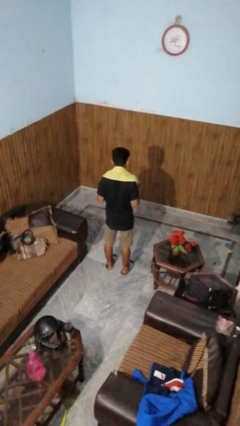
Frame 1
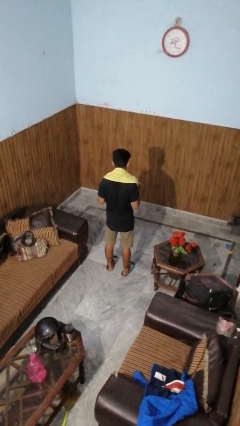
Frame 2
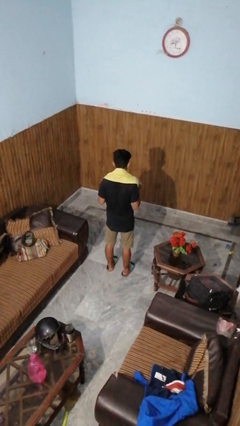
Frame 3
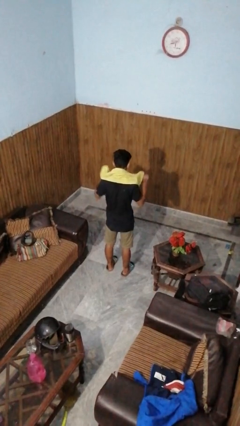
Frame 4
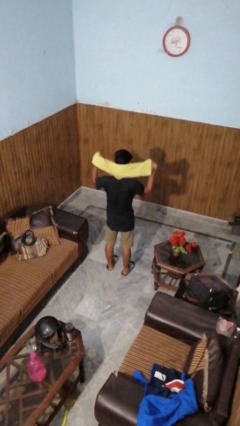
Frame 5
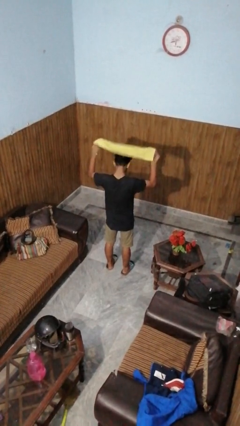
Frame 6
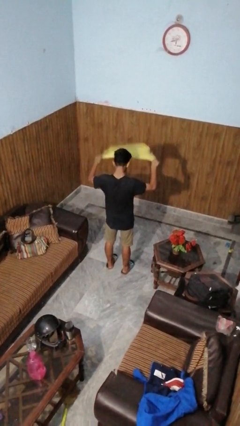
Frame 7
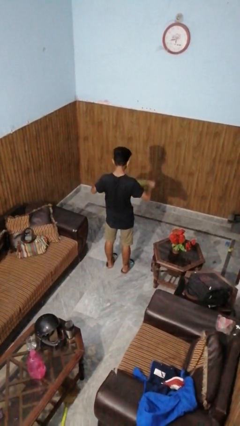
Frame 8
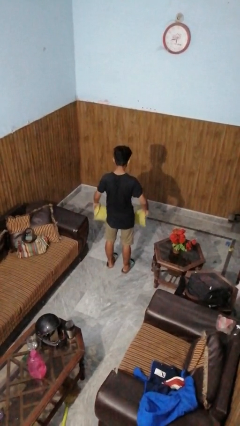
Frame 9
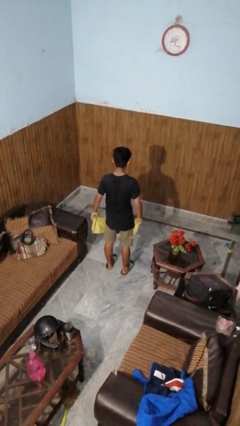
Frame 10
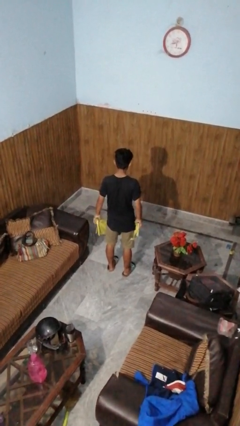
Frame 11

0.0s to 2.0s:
person takes off scarf

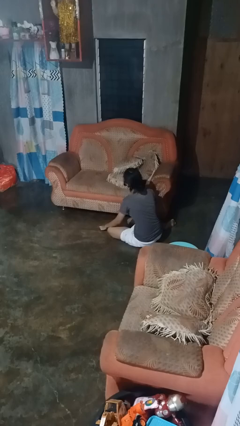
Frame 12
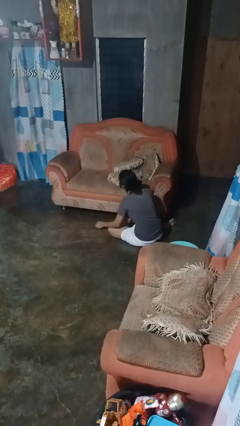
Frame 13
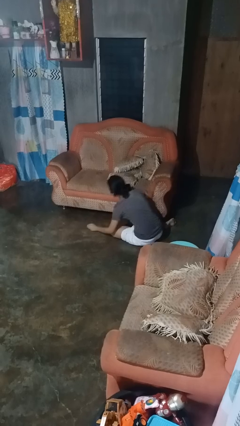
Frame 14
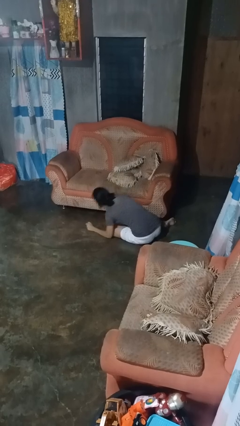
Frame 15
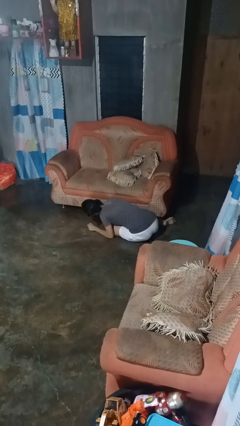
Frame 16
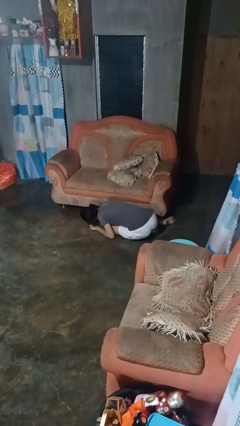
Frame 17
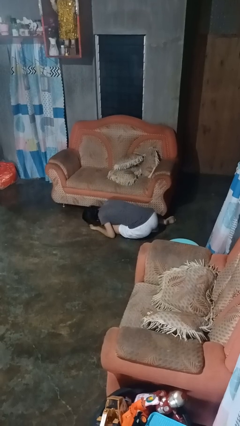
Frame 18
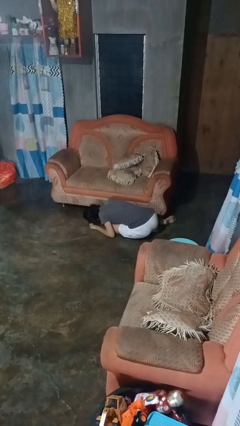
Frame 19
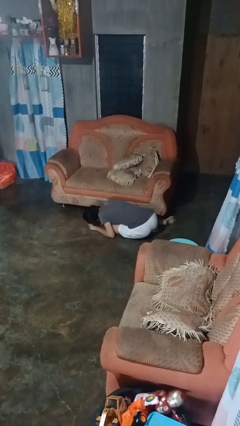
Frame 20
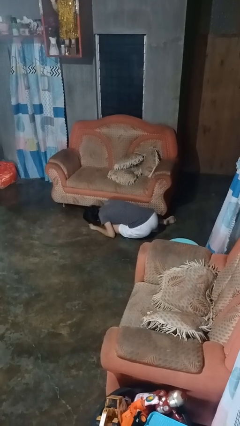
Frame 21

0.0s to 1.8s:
person searches under couch

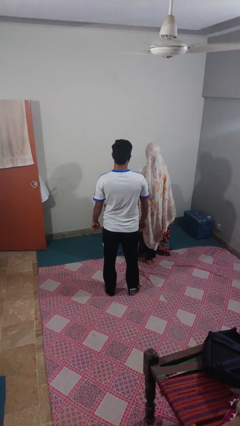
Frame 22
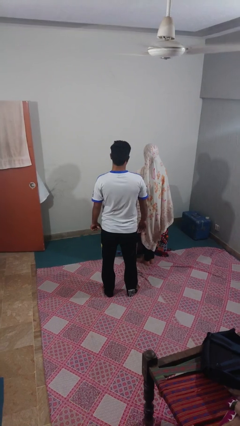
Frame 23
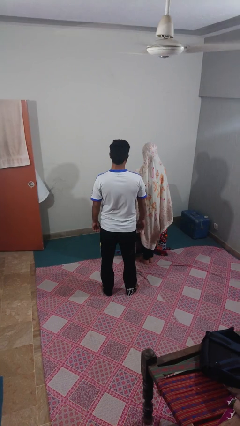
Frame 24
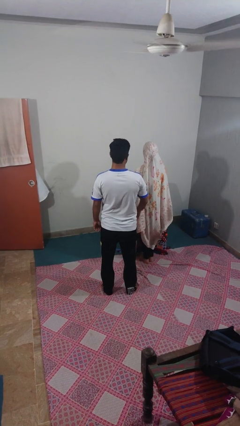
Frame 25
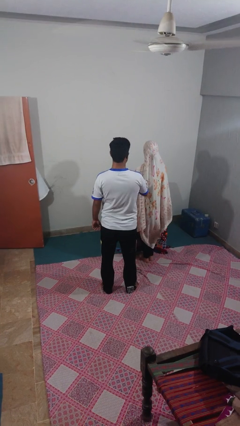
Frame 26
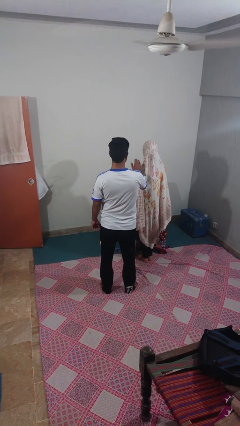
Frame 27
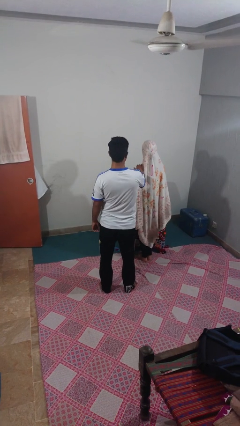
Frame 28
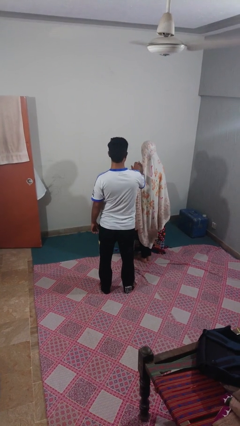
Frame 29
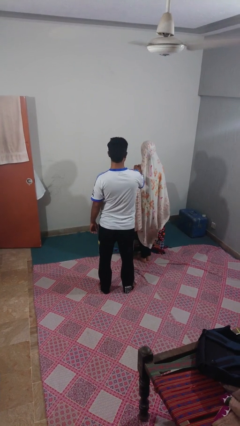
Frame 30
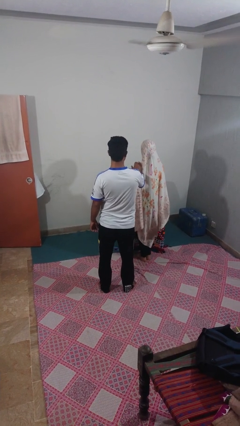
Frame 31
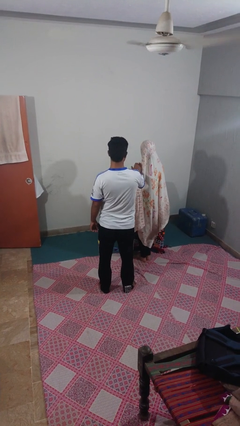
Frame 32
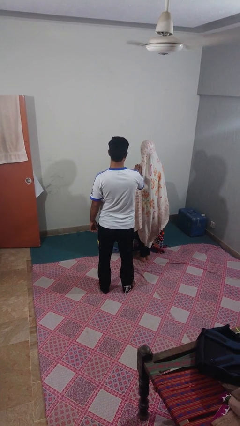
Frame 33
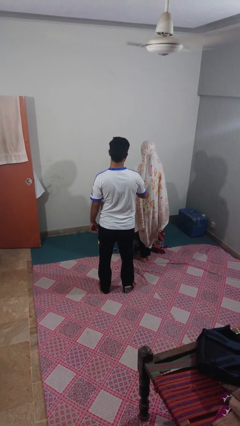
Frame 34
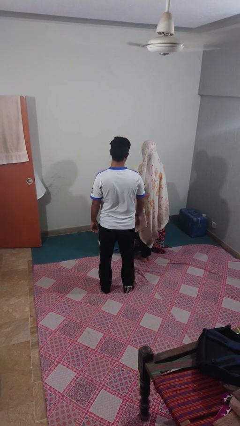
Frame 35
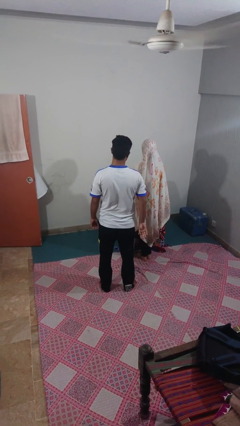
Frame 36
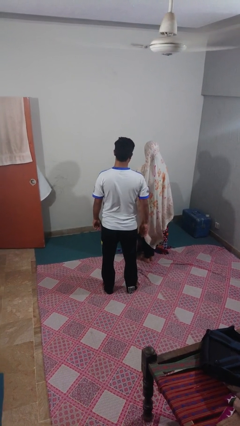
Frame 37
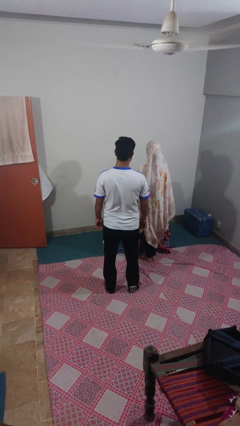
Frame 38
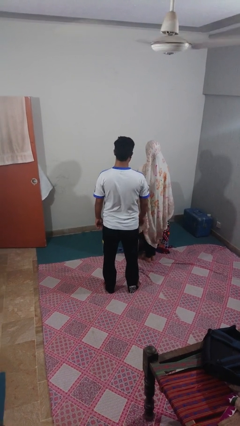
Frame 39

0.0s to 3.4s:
person touches back of person

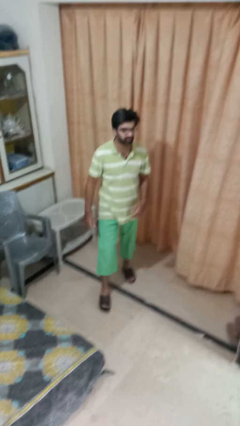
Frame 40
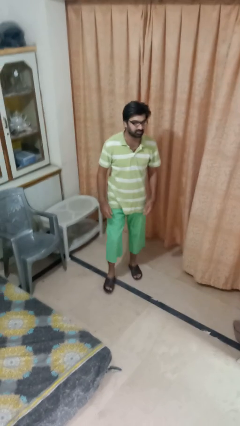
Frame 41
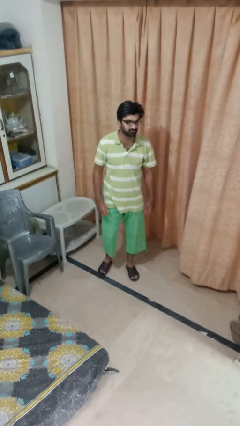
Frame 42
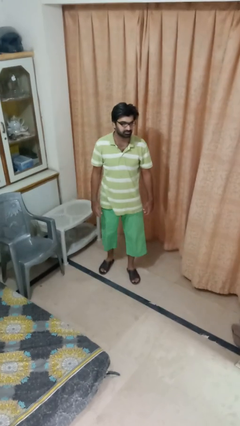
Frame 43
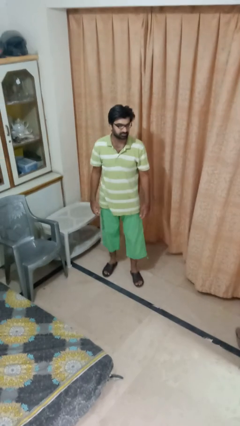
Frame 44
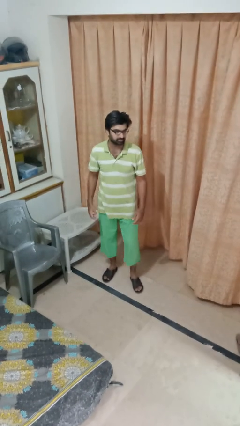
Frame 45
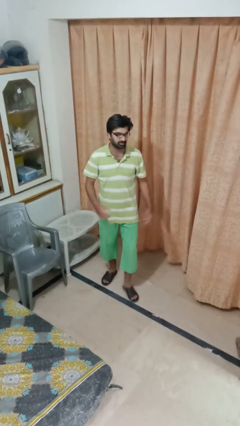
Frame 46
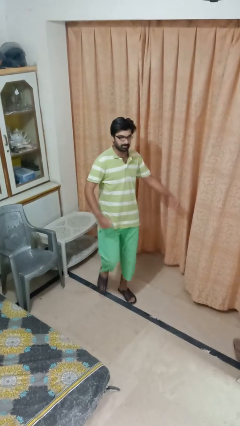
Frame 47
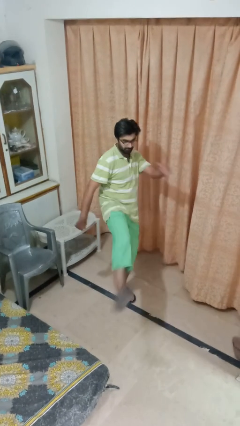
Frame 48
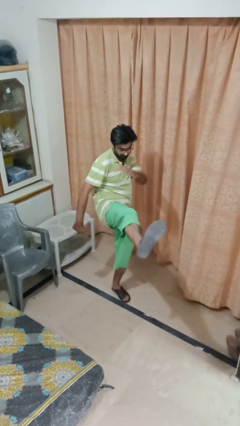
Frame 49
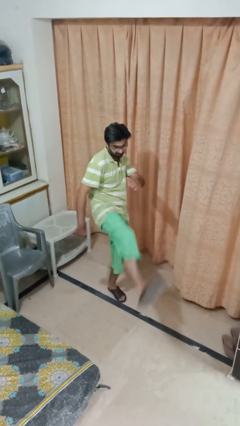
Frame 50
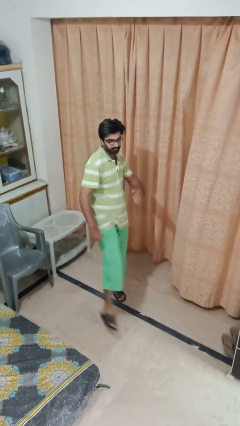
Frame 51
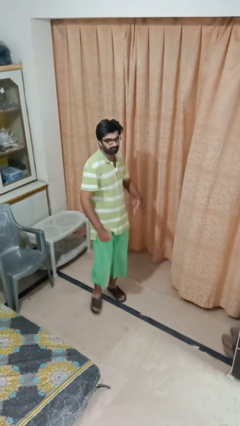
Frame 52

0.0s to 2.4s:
person karate kicks

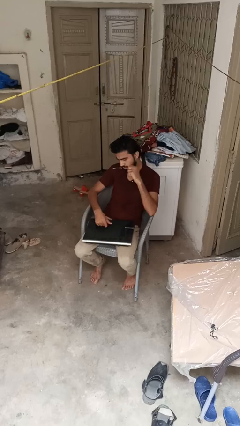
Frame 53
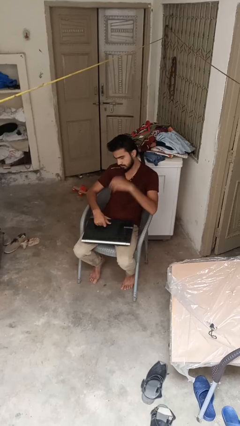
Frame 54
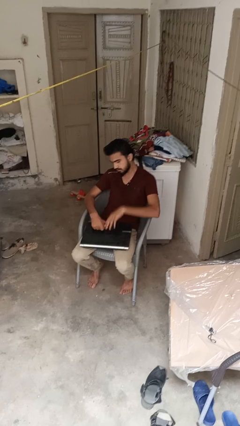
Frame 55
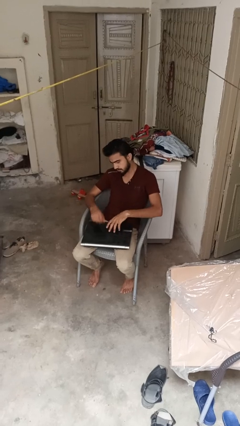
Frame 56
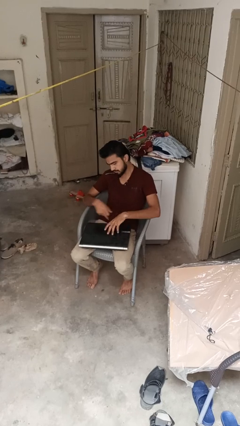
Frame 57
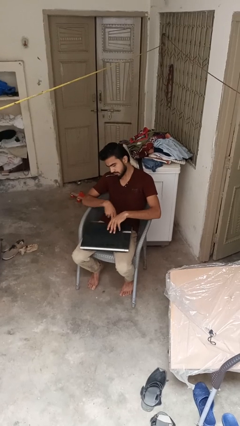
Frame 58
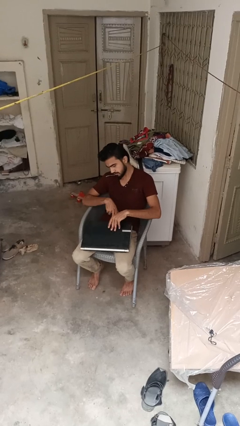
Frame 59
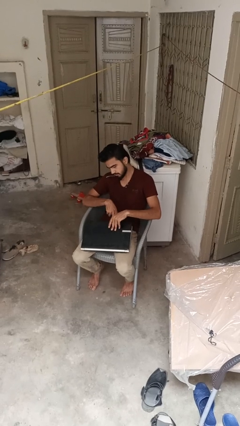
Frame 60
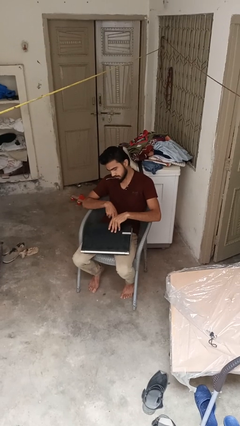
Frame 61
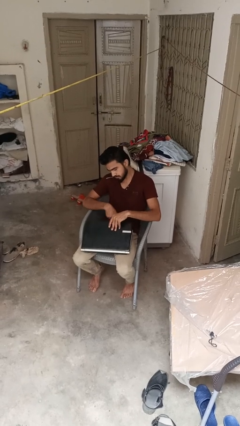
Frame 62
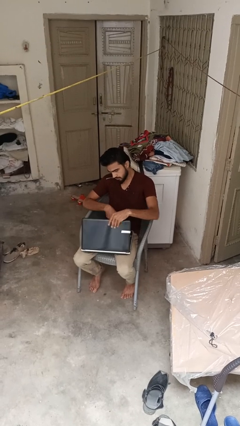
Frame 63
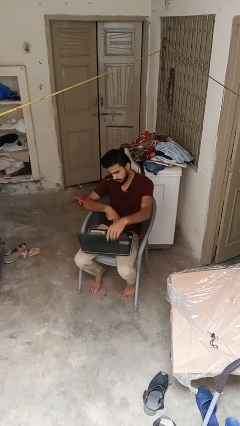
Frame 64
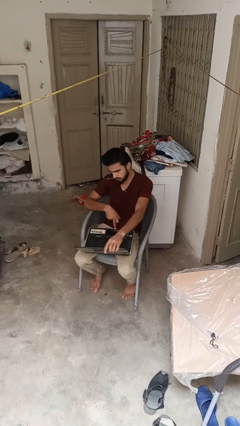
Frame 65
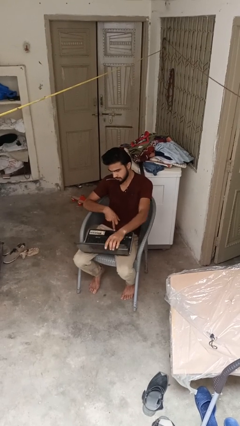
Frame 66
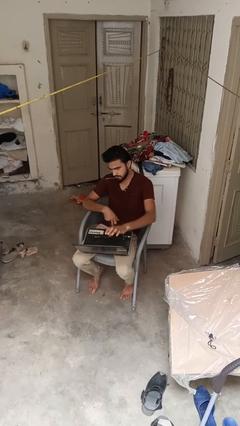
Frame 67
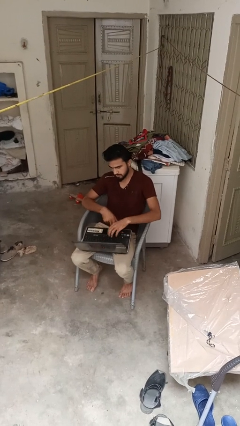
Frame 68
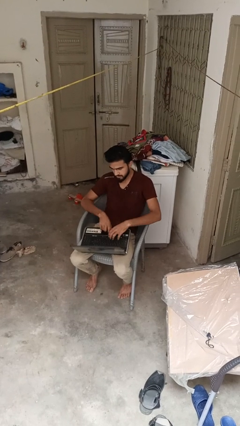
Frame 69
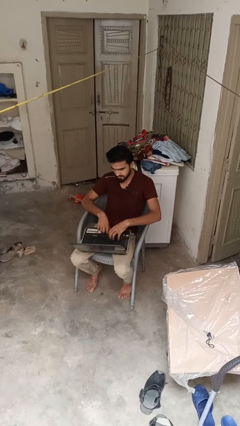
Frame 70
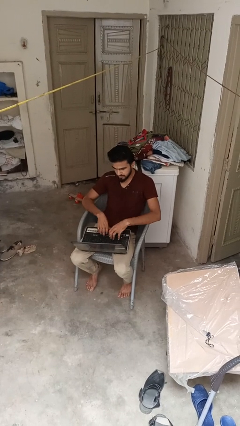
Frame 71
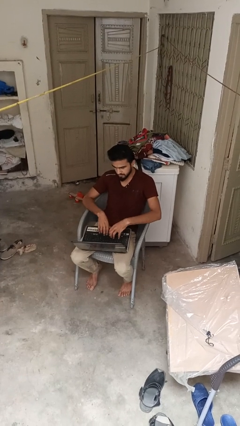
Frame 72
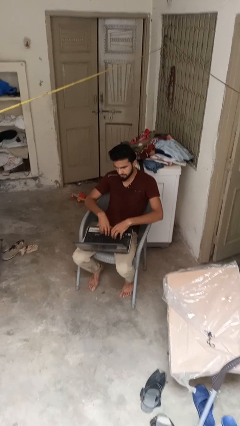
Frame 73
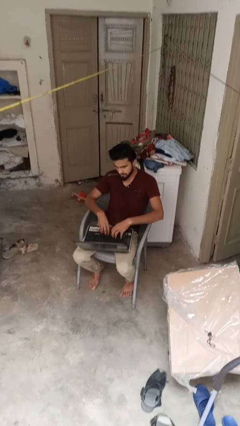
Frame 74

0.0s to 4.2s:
person opens laptop

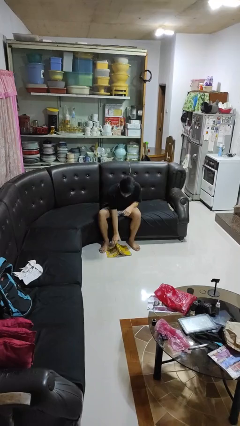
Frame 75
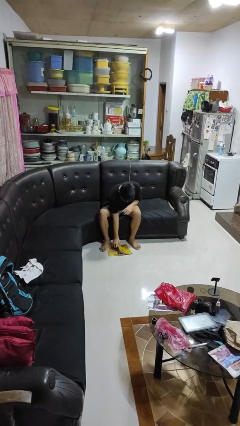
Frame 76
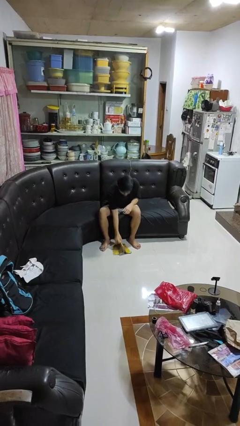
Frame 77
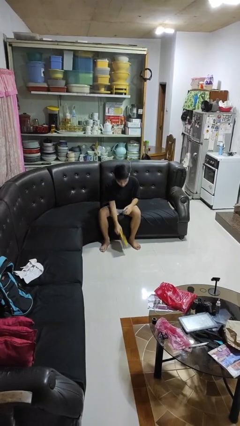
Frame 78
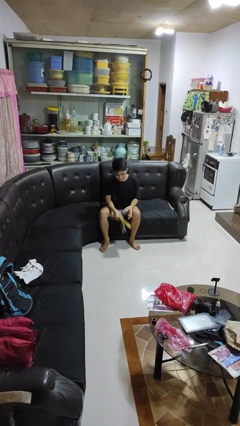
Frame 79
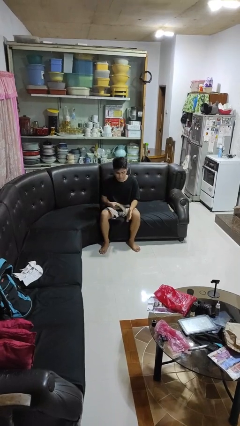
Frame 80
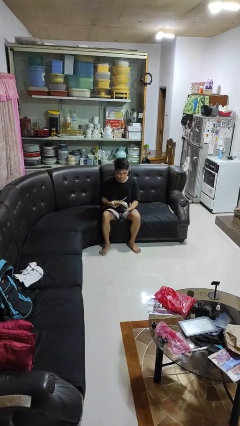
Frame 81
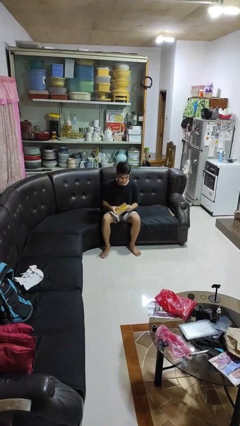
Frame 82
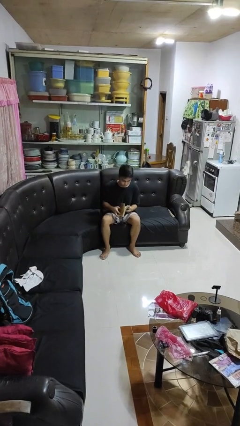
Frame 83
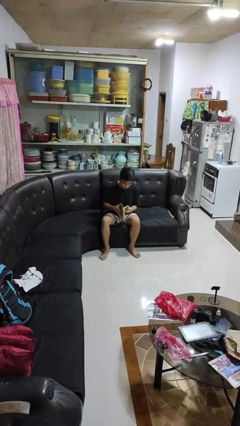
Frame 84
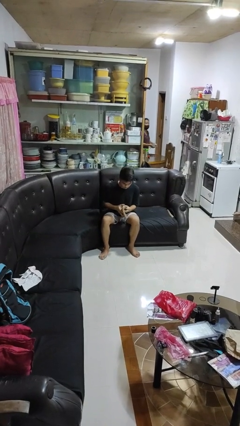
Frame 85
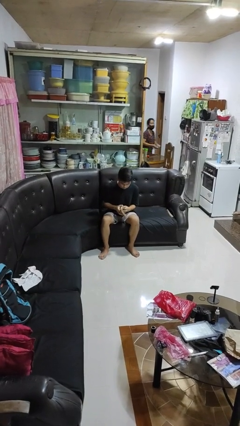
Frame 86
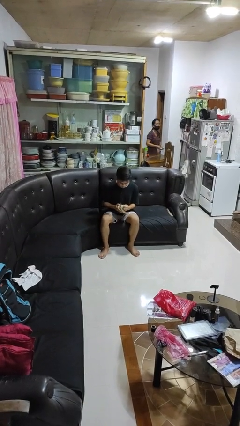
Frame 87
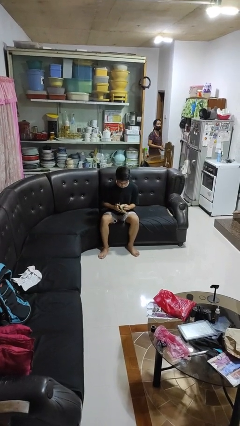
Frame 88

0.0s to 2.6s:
person picks up object from floor

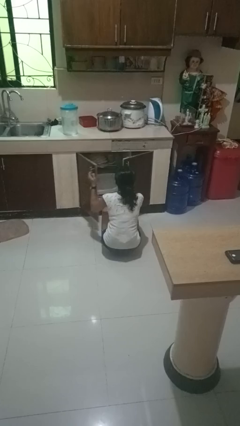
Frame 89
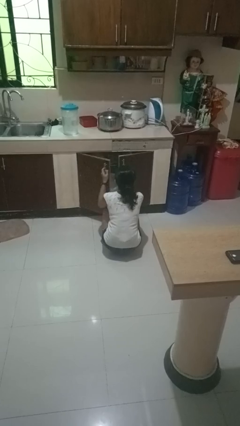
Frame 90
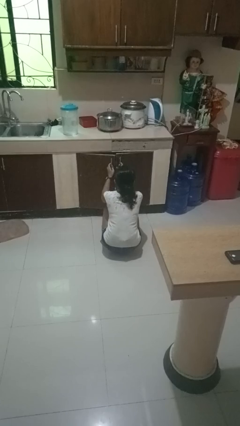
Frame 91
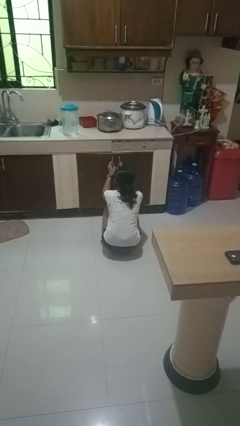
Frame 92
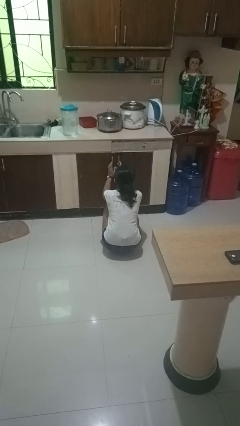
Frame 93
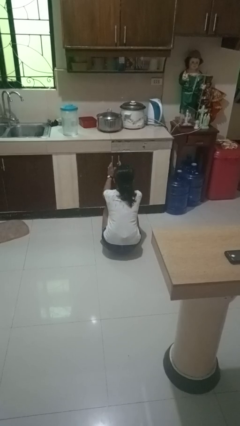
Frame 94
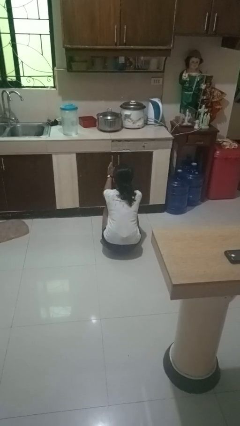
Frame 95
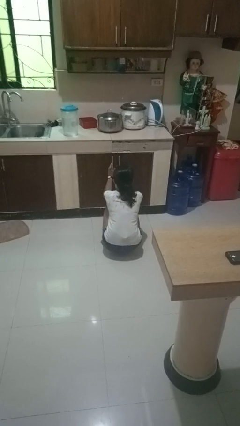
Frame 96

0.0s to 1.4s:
person closes dishwasher
